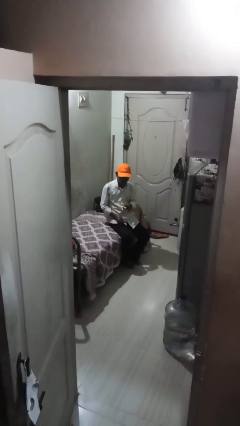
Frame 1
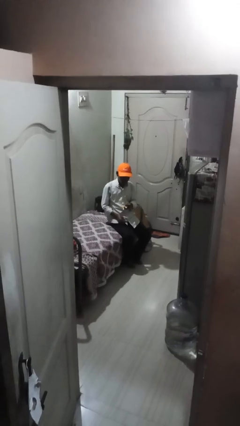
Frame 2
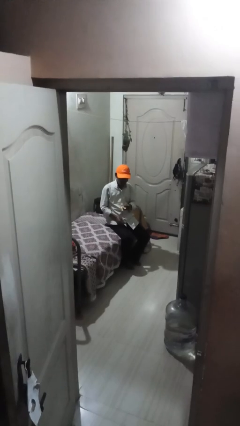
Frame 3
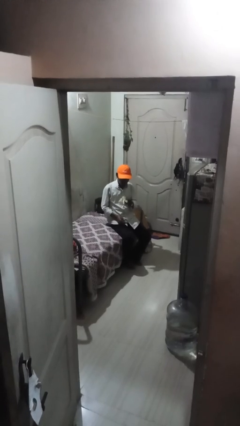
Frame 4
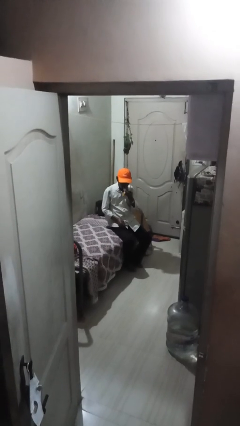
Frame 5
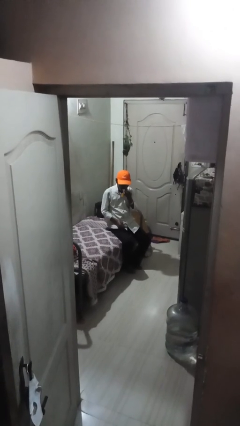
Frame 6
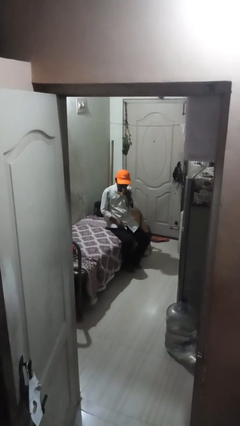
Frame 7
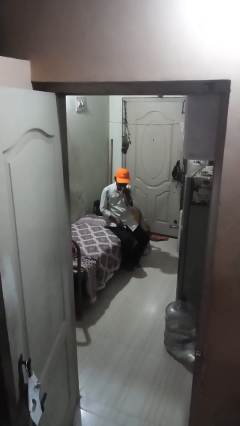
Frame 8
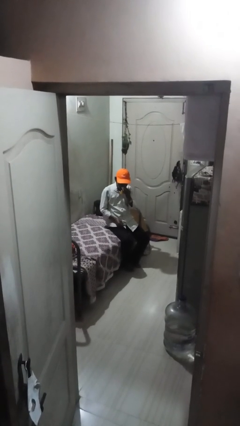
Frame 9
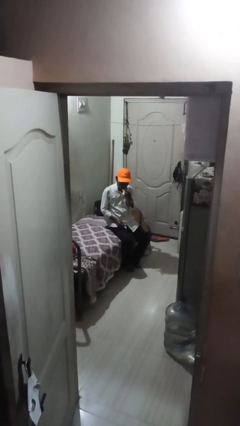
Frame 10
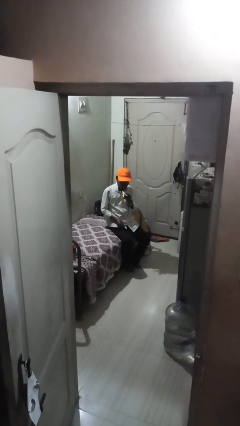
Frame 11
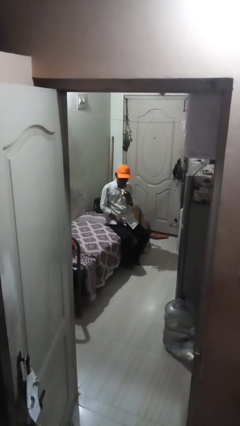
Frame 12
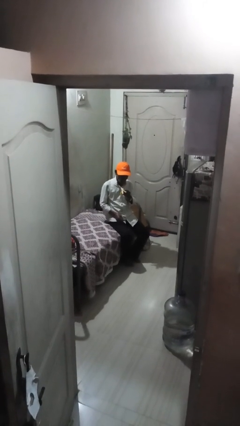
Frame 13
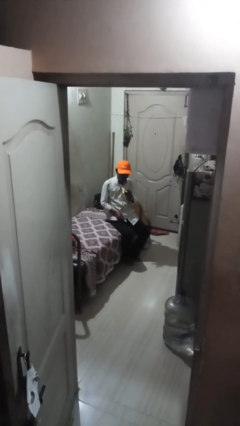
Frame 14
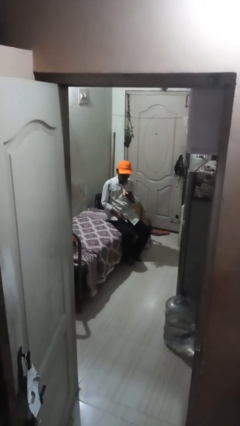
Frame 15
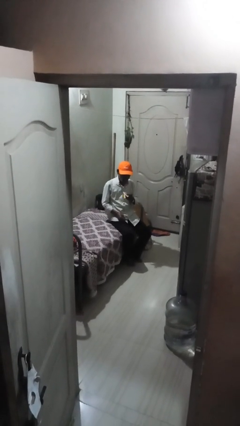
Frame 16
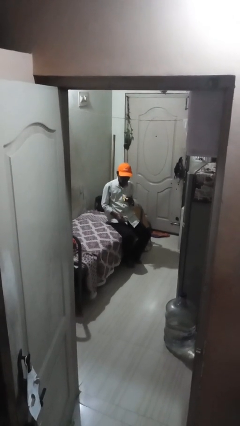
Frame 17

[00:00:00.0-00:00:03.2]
person eats banana

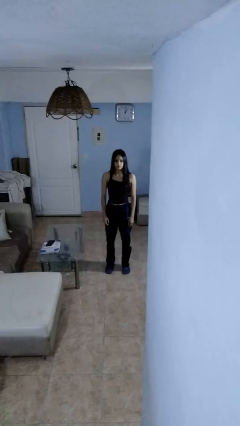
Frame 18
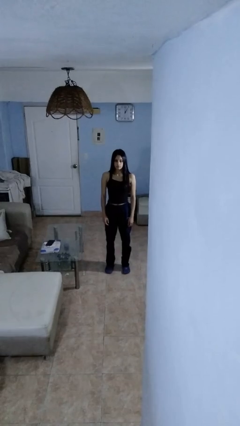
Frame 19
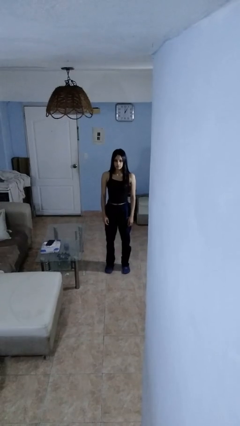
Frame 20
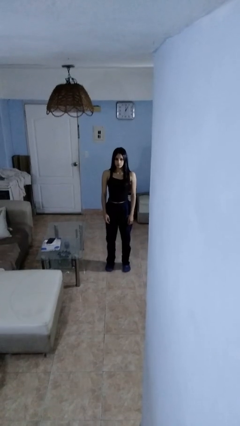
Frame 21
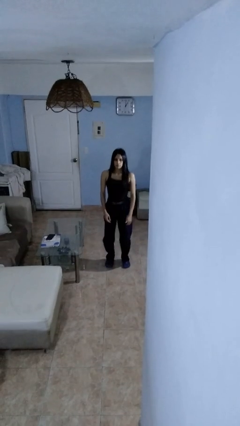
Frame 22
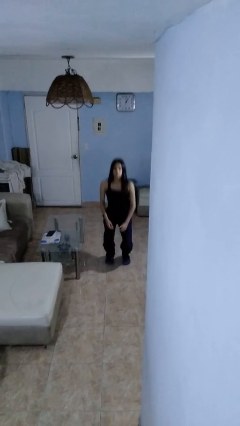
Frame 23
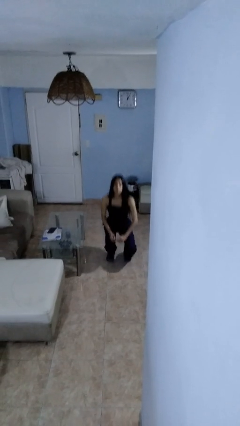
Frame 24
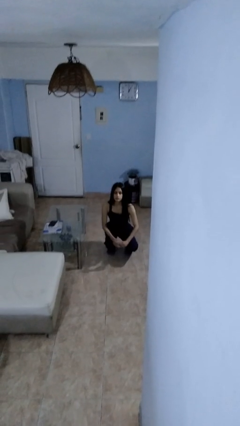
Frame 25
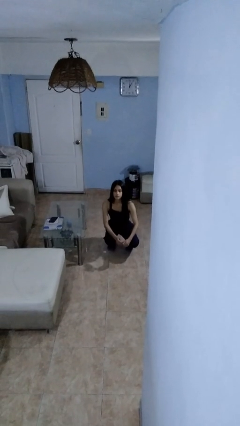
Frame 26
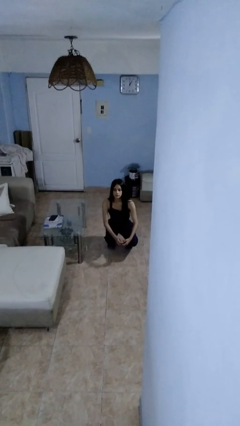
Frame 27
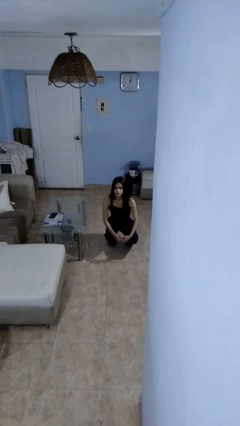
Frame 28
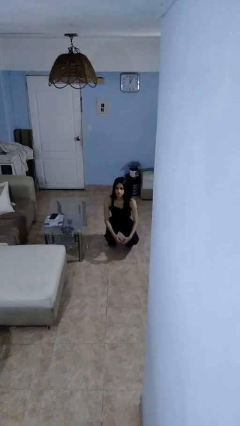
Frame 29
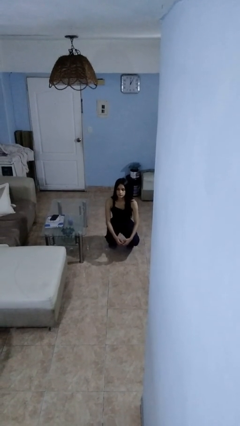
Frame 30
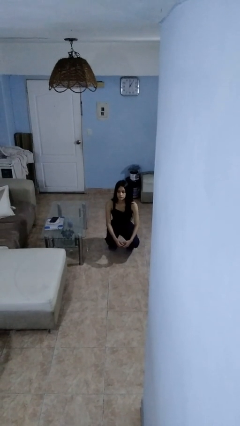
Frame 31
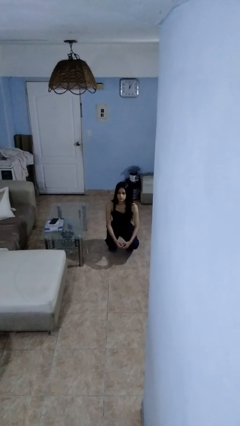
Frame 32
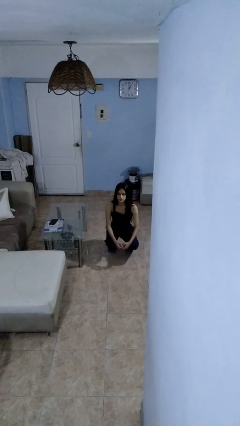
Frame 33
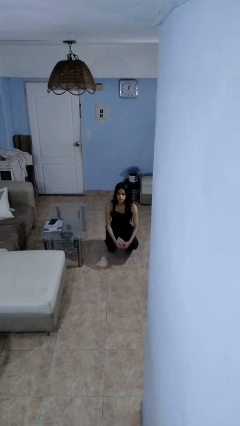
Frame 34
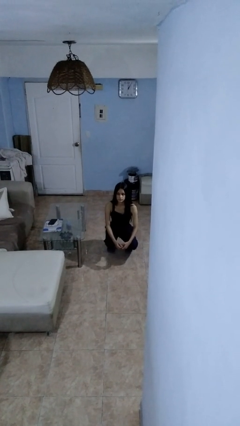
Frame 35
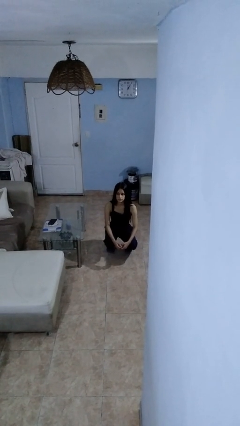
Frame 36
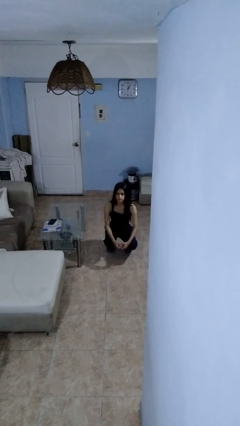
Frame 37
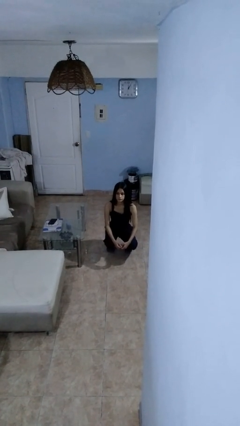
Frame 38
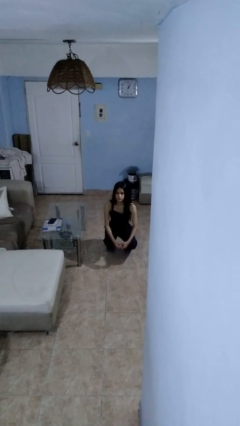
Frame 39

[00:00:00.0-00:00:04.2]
person squats

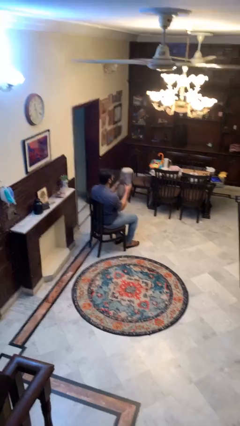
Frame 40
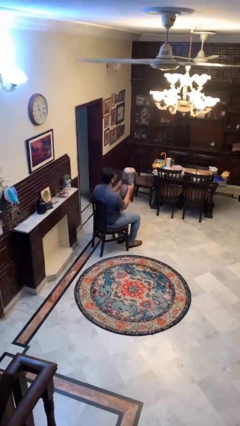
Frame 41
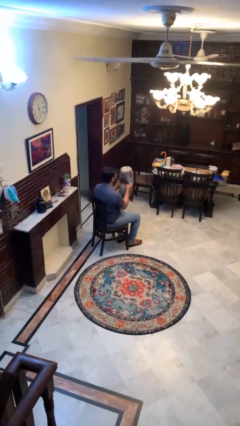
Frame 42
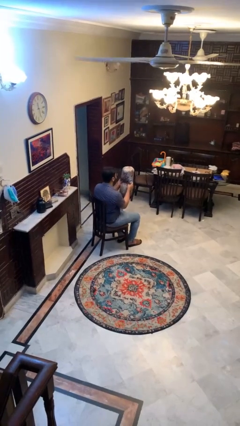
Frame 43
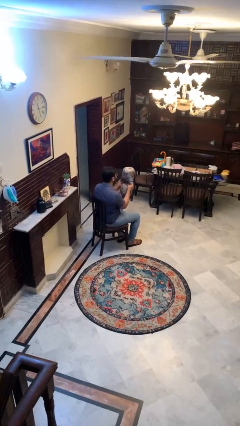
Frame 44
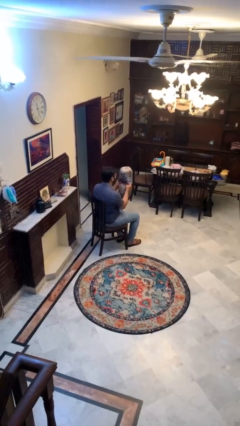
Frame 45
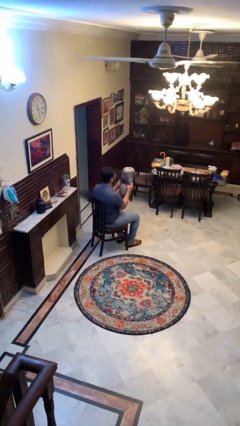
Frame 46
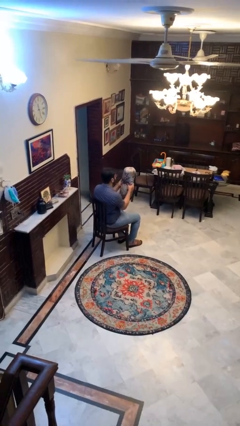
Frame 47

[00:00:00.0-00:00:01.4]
person squeezes object

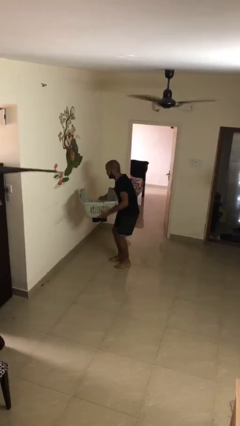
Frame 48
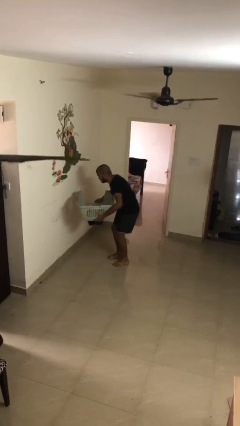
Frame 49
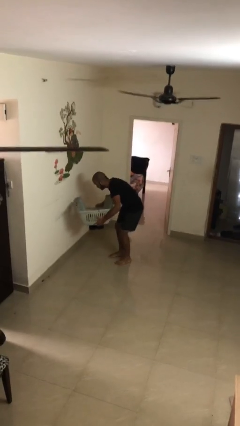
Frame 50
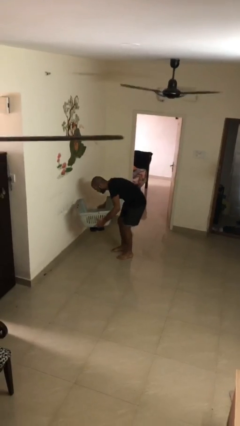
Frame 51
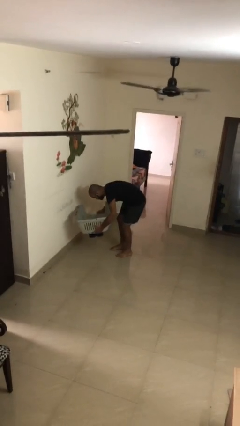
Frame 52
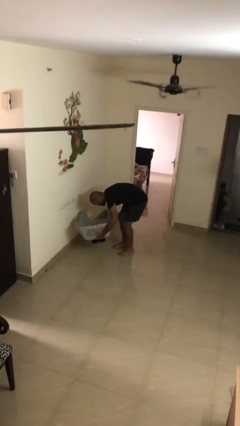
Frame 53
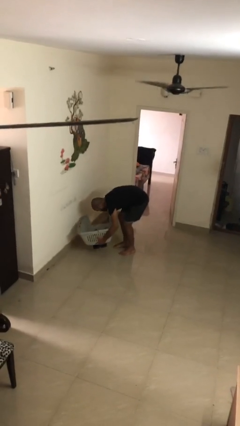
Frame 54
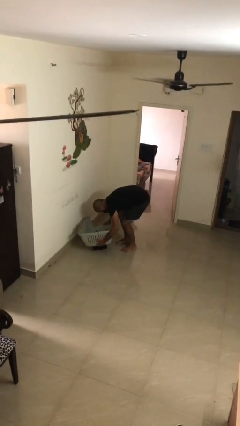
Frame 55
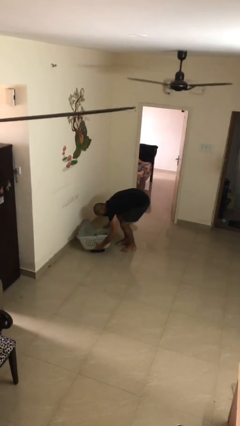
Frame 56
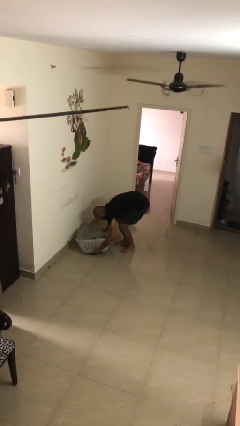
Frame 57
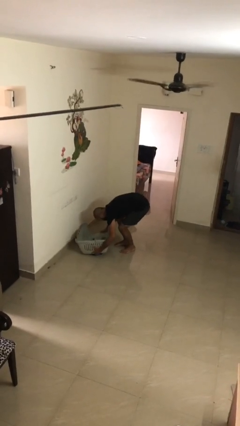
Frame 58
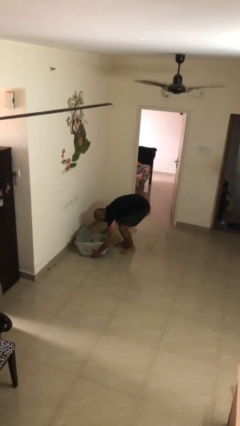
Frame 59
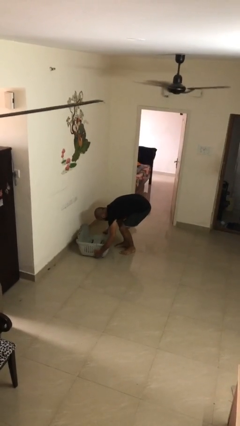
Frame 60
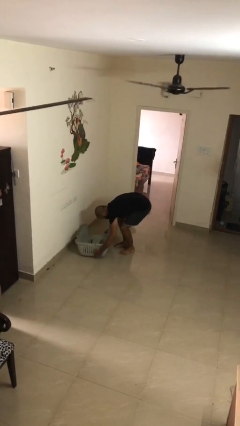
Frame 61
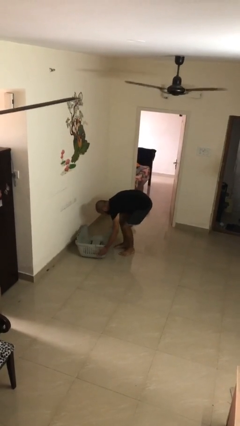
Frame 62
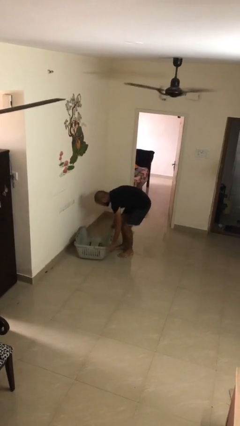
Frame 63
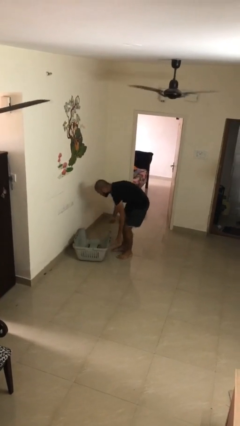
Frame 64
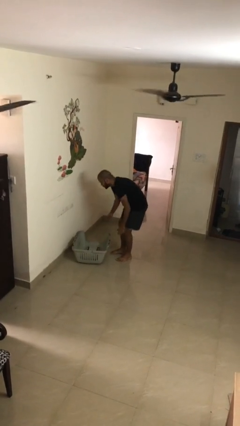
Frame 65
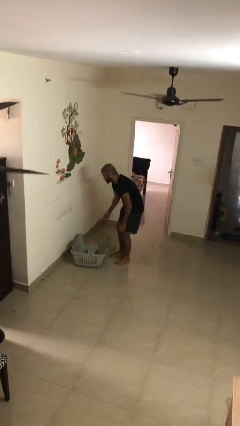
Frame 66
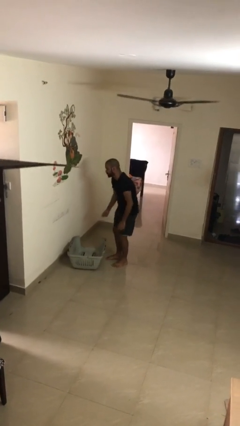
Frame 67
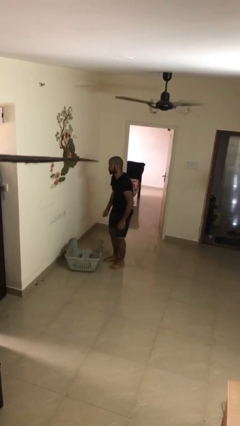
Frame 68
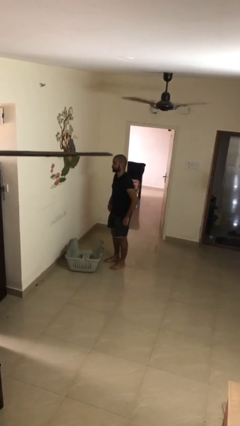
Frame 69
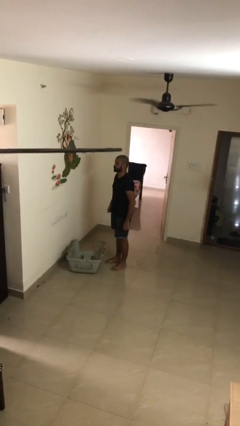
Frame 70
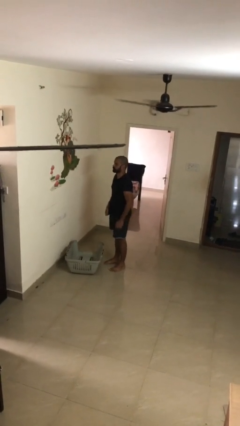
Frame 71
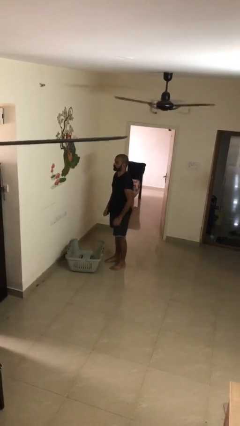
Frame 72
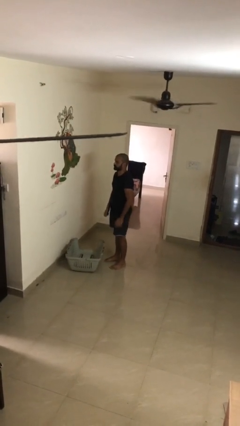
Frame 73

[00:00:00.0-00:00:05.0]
person puts down object on floor

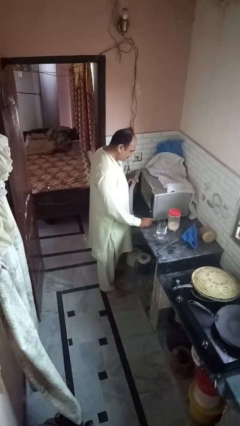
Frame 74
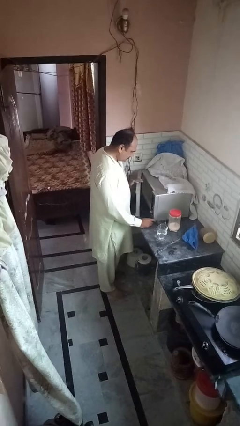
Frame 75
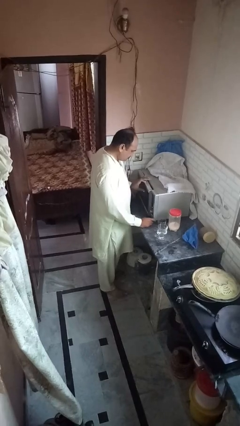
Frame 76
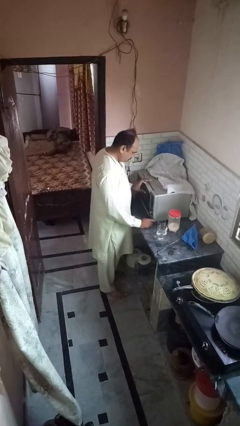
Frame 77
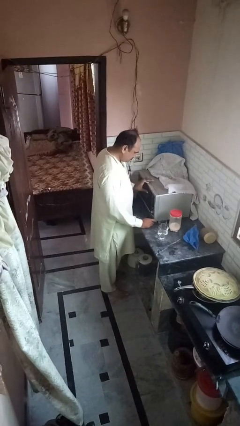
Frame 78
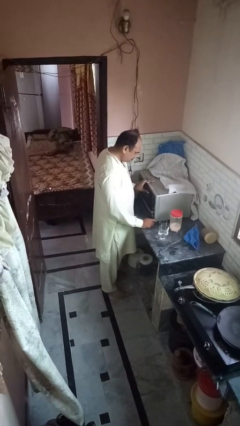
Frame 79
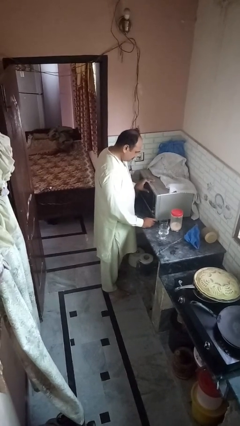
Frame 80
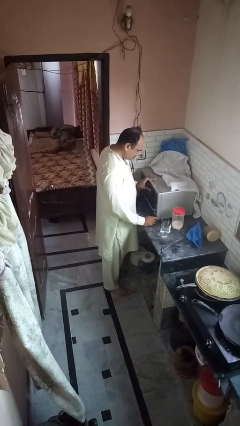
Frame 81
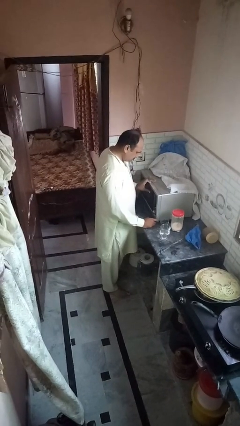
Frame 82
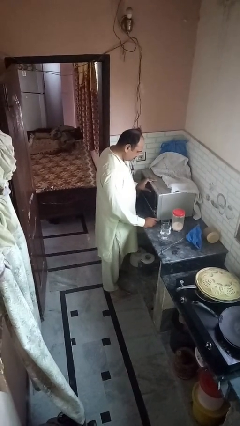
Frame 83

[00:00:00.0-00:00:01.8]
person closes microwave

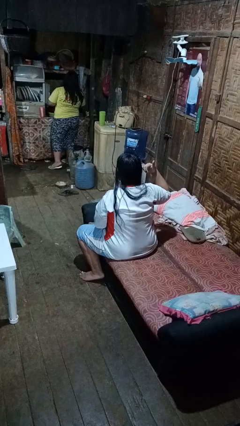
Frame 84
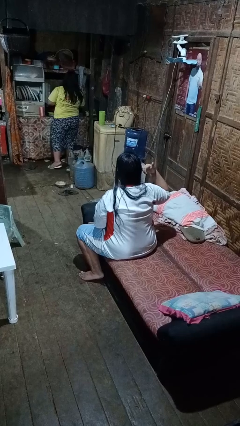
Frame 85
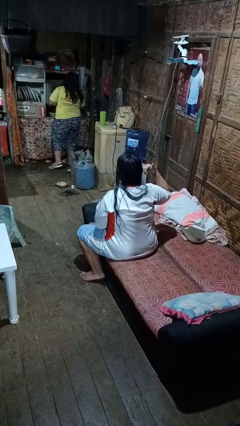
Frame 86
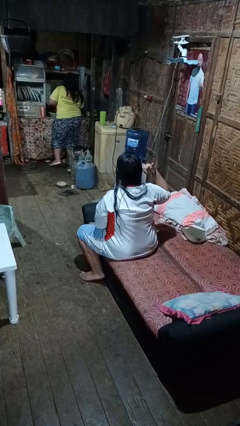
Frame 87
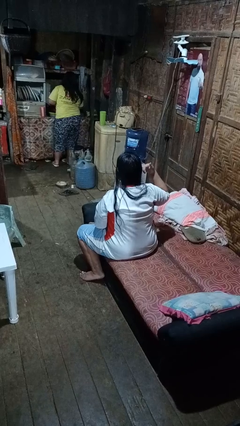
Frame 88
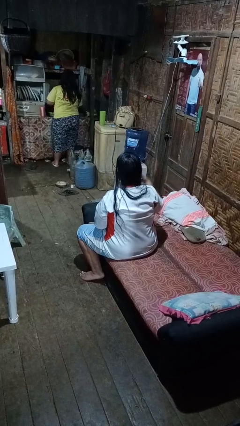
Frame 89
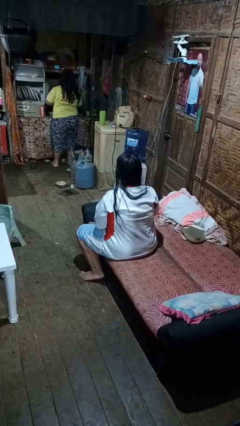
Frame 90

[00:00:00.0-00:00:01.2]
person gestures call me

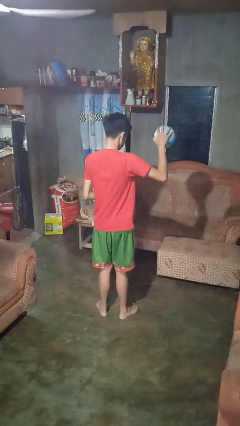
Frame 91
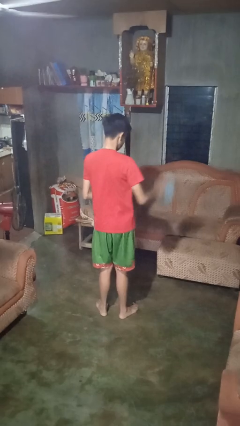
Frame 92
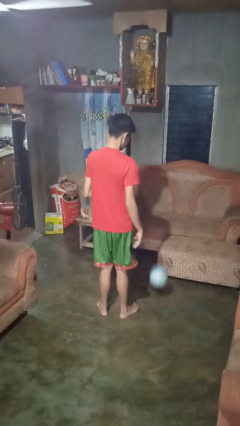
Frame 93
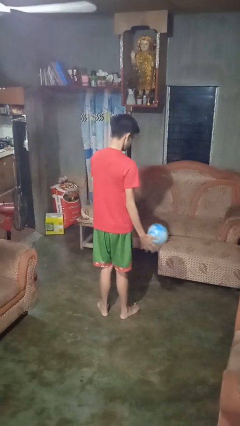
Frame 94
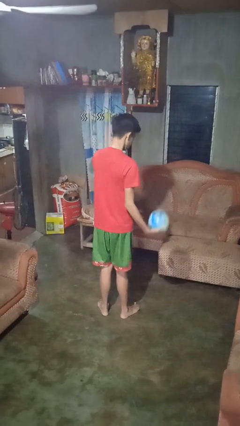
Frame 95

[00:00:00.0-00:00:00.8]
person bounces ball on floor
